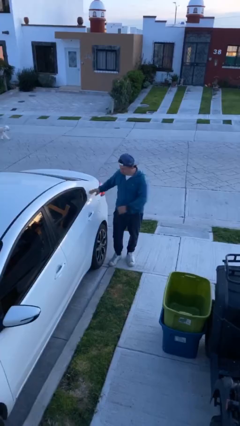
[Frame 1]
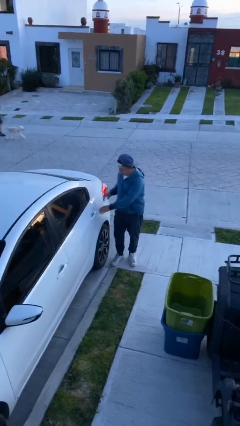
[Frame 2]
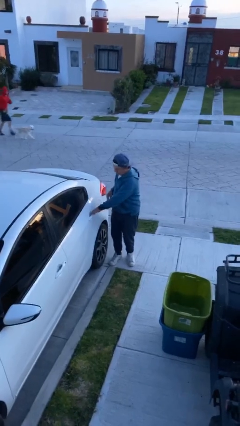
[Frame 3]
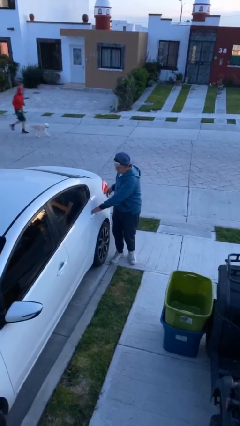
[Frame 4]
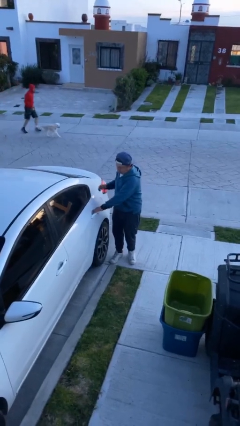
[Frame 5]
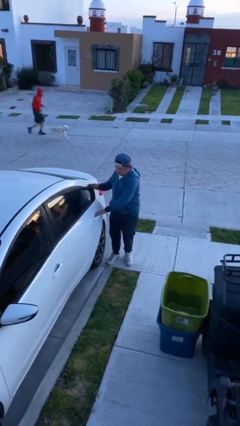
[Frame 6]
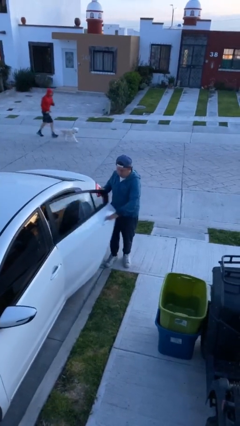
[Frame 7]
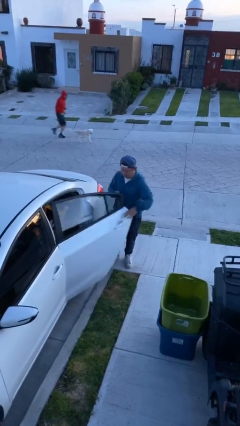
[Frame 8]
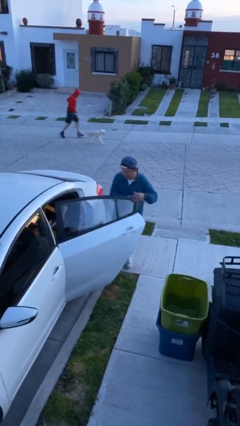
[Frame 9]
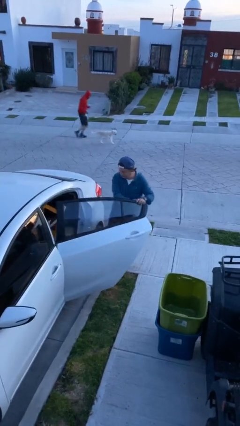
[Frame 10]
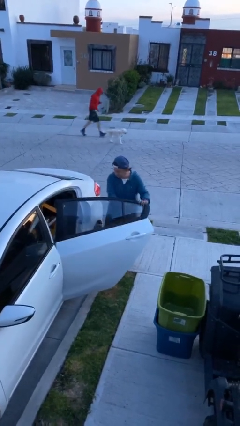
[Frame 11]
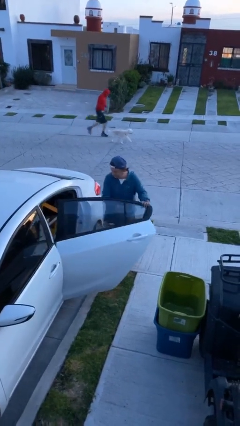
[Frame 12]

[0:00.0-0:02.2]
person opens car door

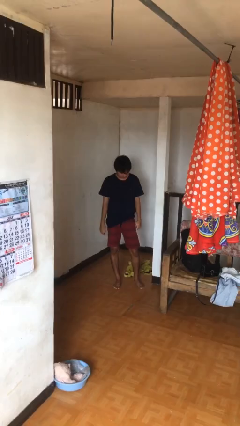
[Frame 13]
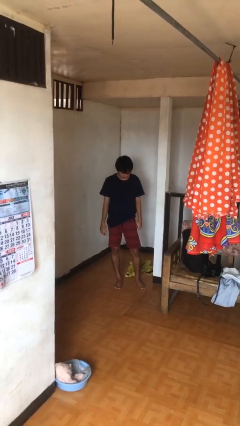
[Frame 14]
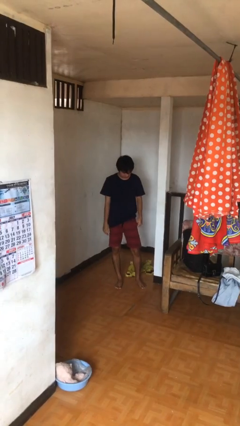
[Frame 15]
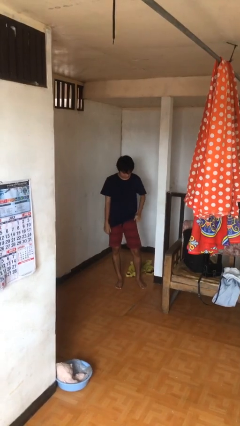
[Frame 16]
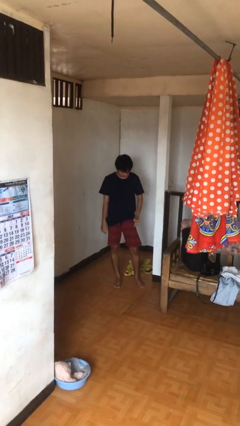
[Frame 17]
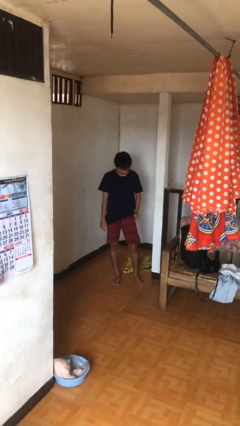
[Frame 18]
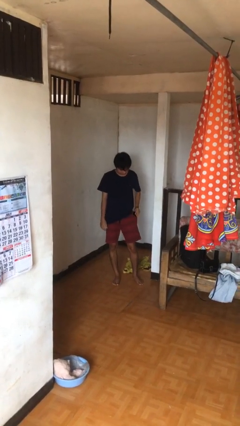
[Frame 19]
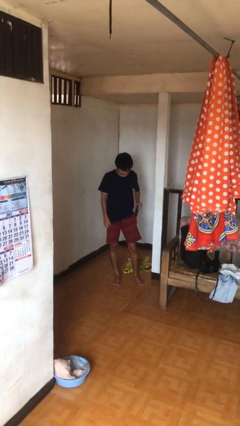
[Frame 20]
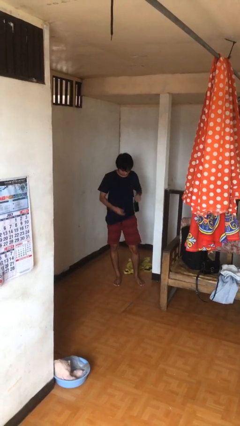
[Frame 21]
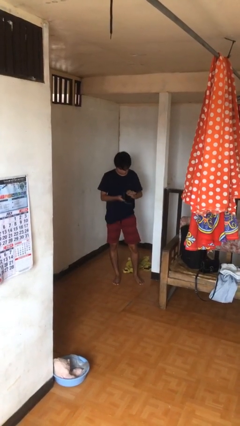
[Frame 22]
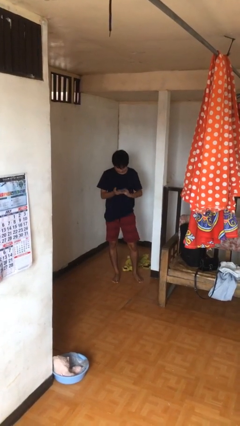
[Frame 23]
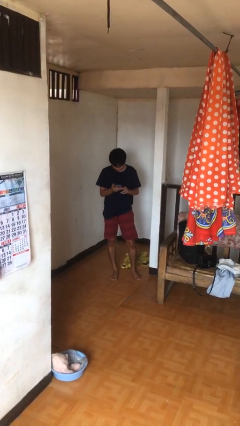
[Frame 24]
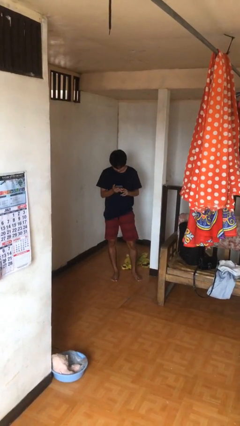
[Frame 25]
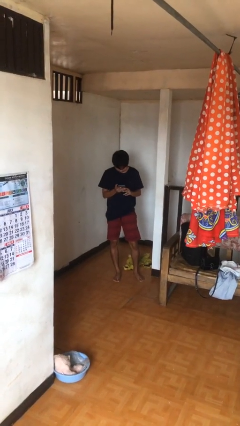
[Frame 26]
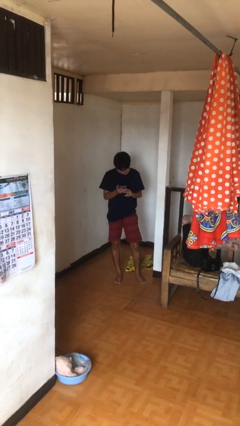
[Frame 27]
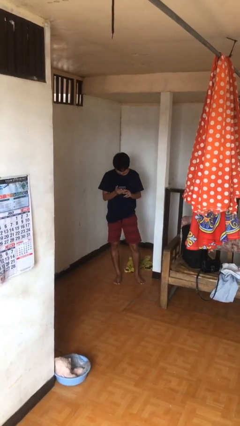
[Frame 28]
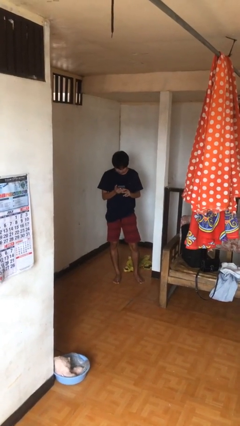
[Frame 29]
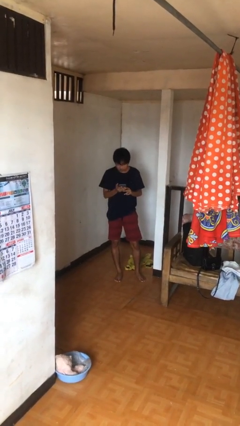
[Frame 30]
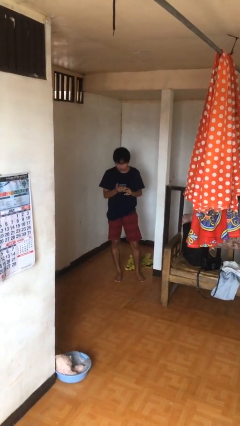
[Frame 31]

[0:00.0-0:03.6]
person takes phone from pocket

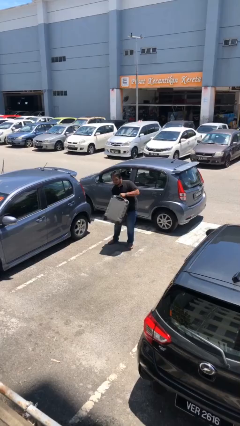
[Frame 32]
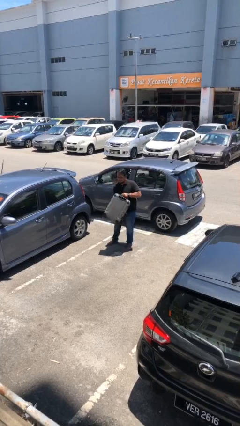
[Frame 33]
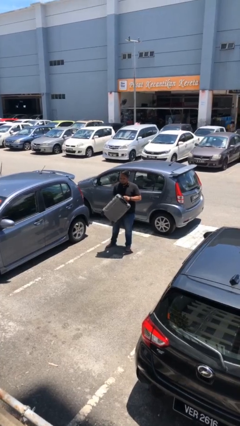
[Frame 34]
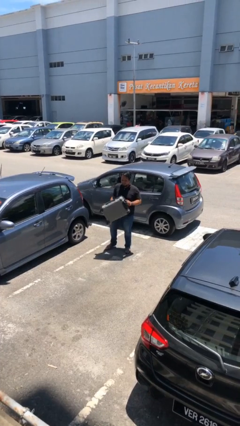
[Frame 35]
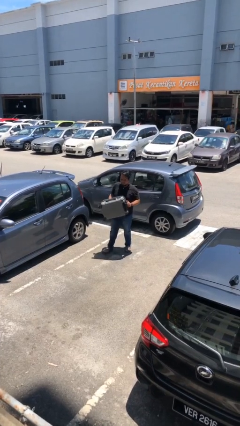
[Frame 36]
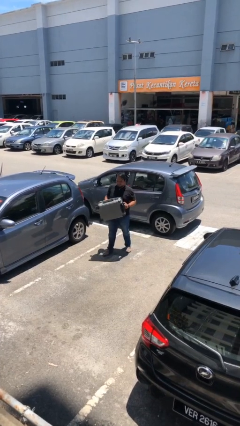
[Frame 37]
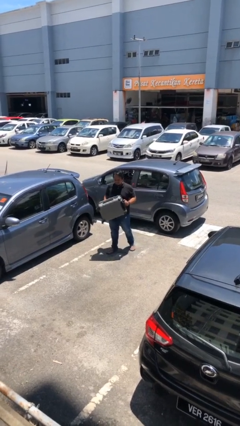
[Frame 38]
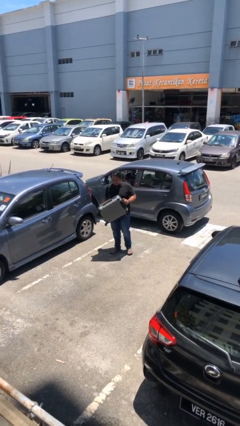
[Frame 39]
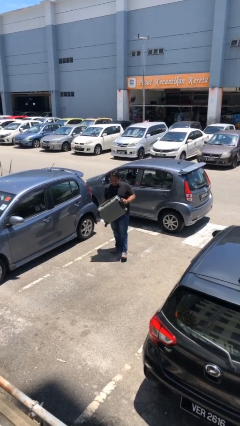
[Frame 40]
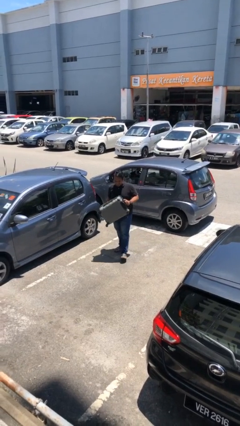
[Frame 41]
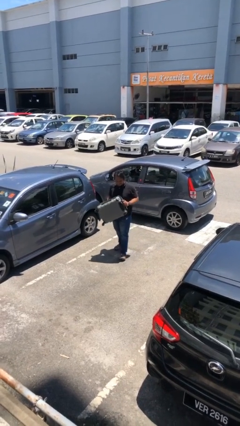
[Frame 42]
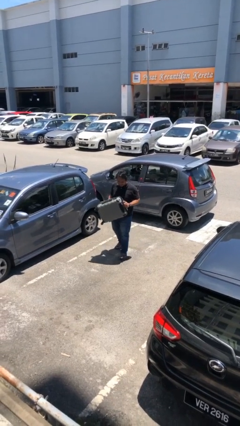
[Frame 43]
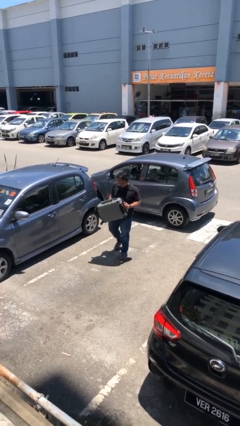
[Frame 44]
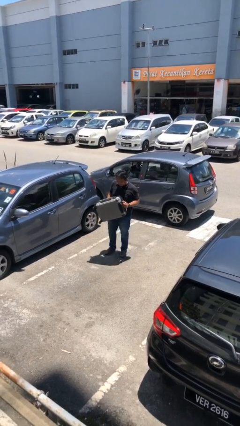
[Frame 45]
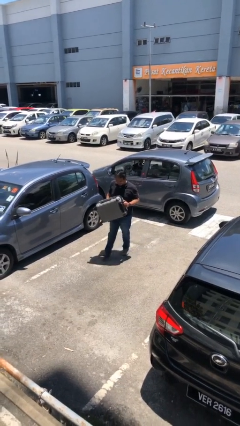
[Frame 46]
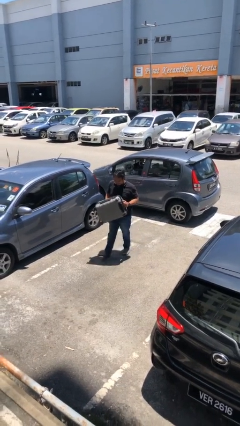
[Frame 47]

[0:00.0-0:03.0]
person carries heavy object

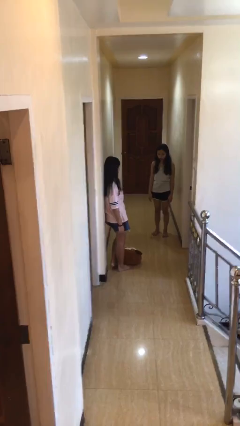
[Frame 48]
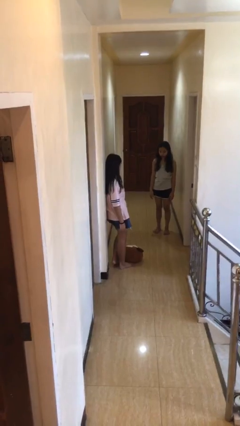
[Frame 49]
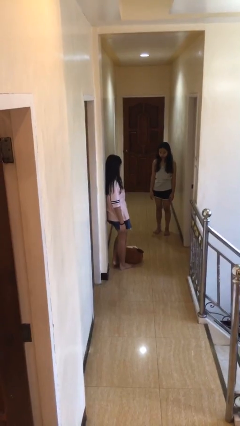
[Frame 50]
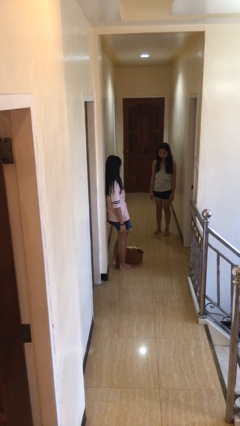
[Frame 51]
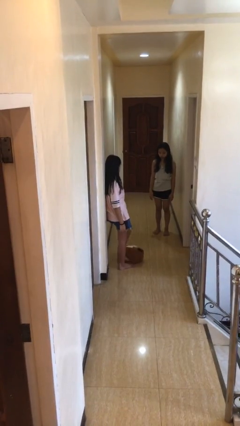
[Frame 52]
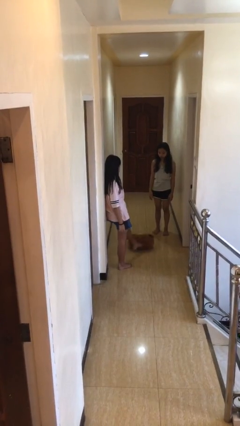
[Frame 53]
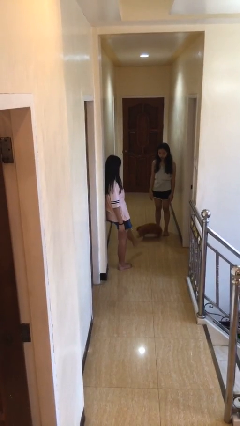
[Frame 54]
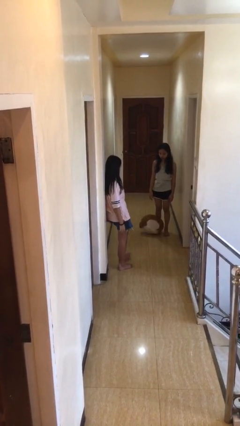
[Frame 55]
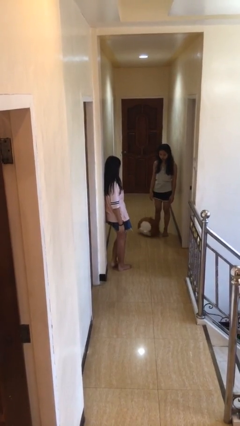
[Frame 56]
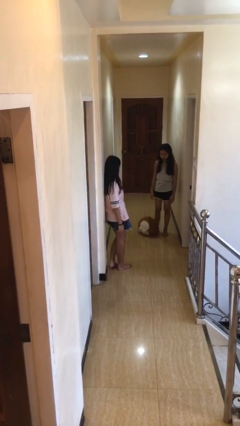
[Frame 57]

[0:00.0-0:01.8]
person kicks object to person

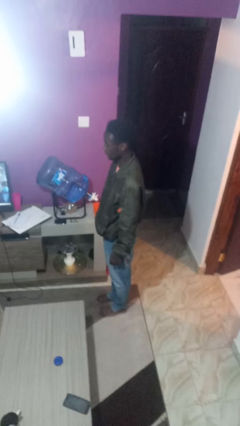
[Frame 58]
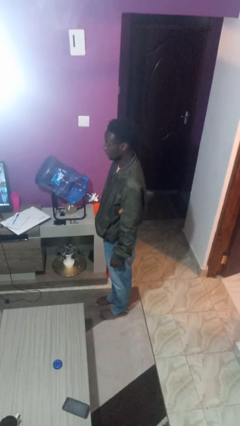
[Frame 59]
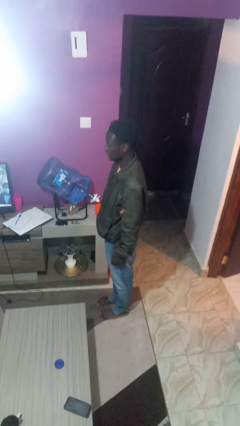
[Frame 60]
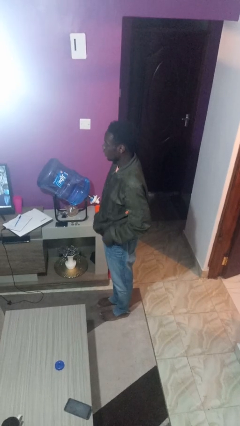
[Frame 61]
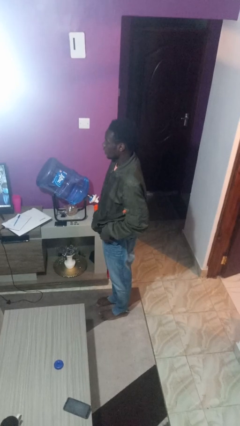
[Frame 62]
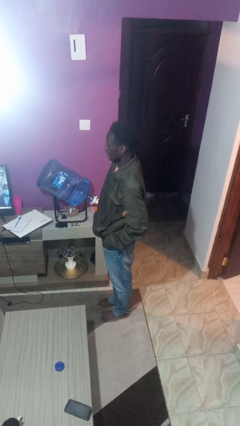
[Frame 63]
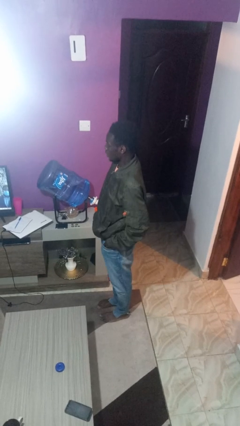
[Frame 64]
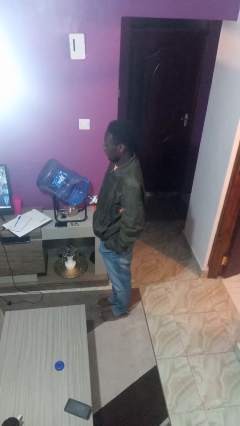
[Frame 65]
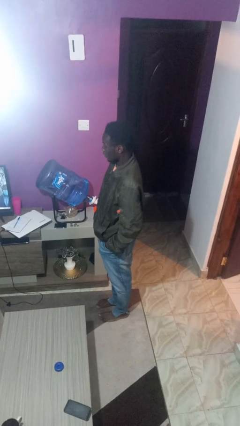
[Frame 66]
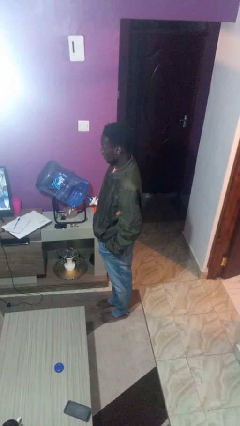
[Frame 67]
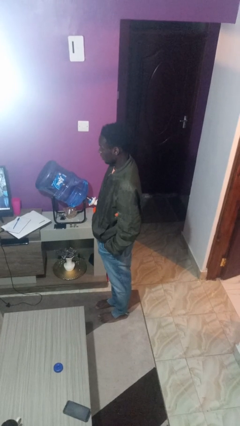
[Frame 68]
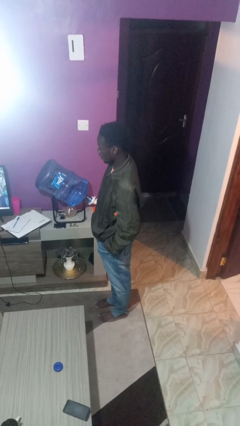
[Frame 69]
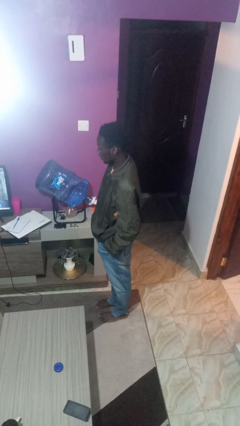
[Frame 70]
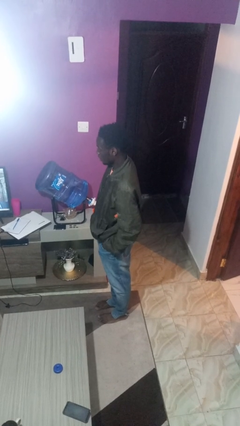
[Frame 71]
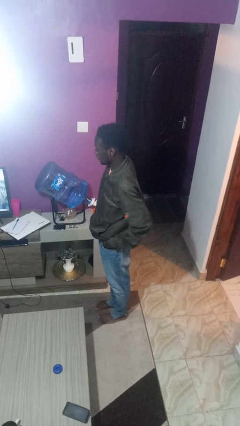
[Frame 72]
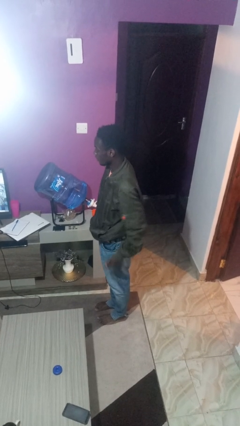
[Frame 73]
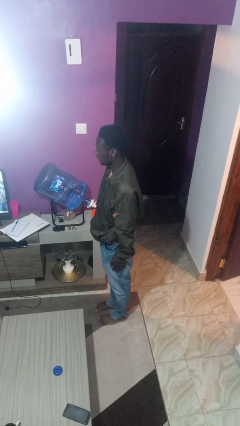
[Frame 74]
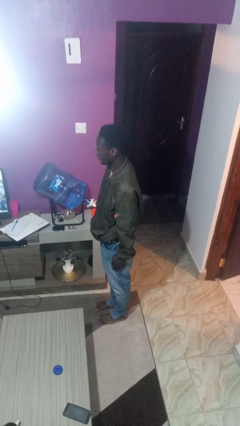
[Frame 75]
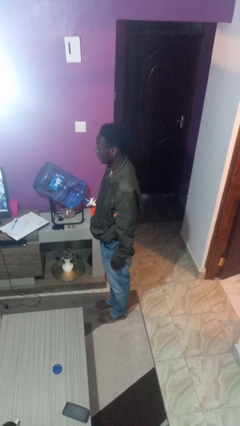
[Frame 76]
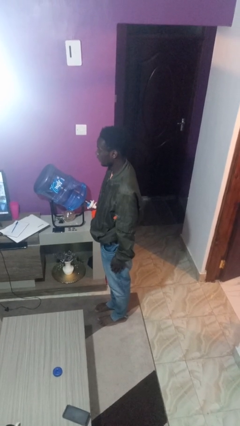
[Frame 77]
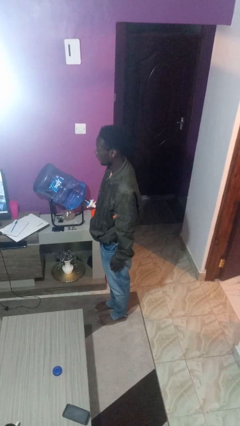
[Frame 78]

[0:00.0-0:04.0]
person puts hands in back pockets

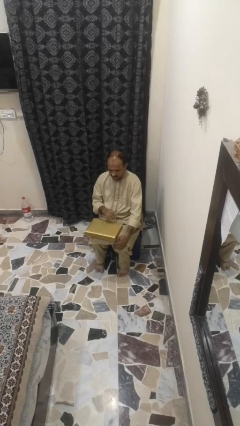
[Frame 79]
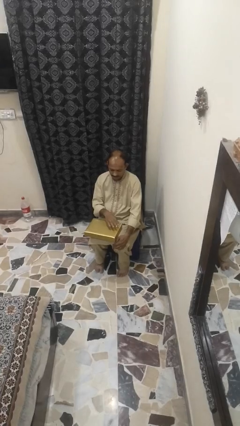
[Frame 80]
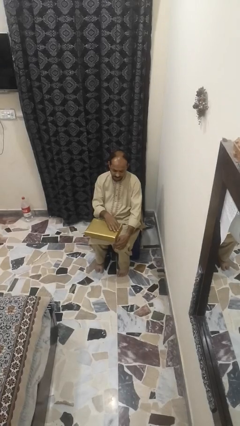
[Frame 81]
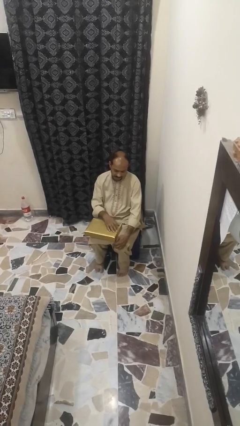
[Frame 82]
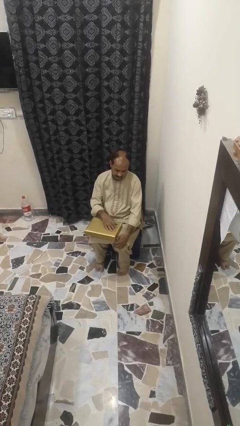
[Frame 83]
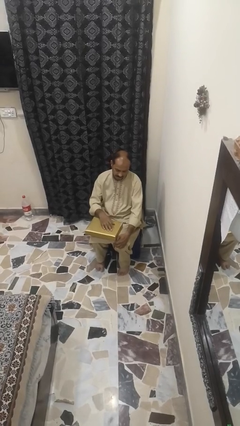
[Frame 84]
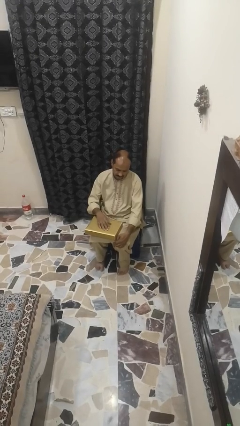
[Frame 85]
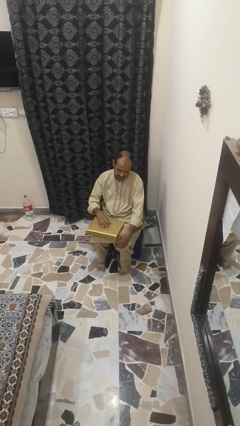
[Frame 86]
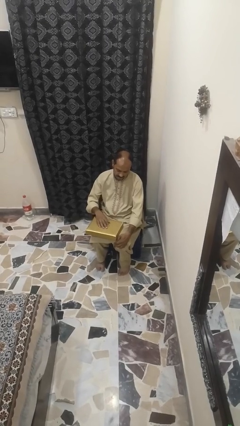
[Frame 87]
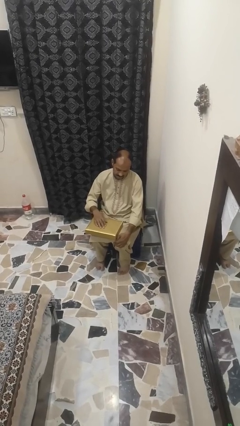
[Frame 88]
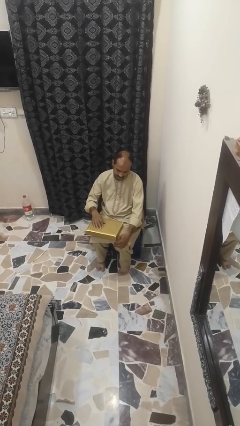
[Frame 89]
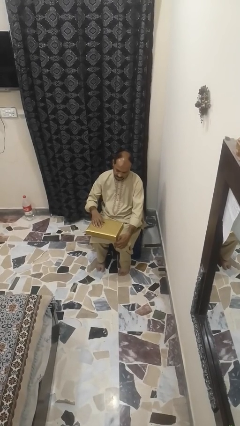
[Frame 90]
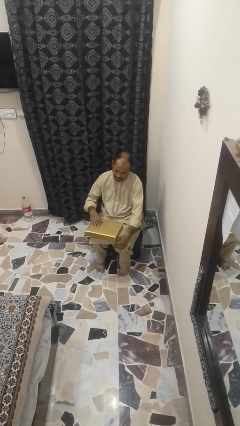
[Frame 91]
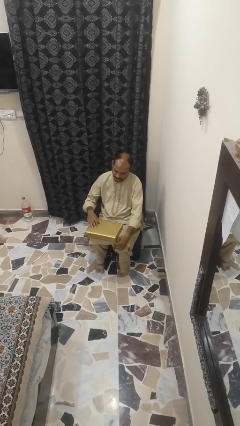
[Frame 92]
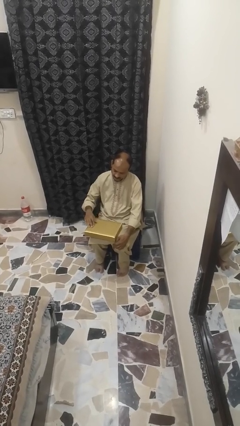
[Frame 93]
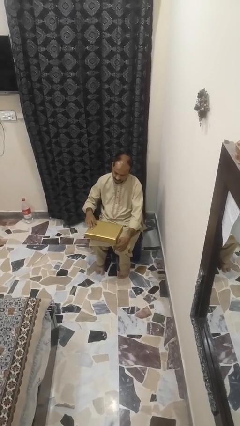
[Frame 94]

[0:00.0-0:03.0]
person waves hand over object
